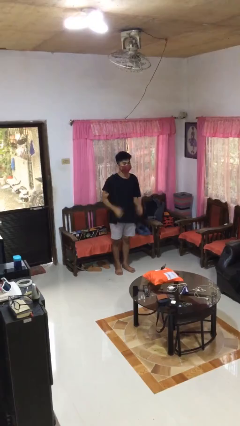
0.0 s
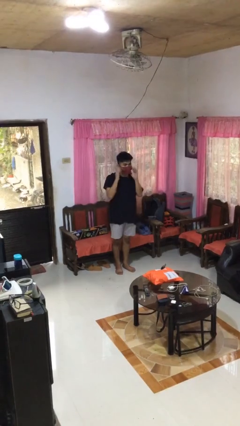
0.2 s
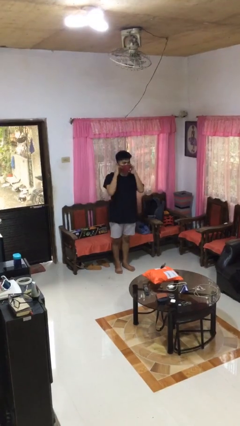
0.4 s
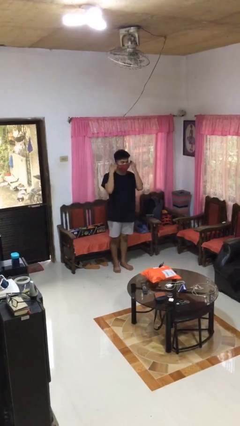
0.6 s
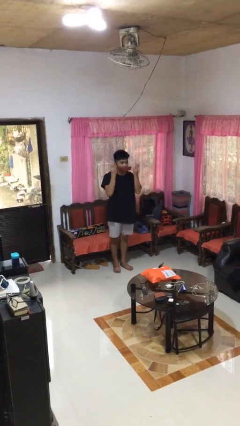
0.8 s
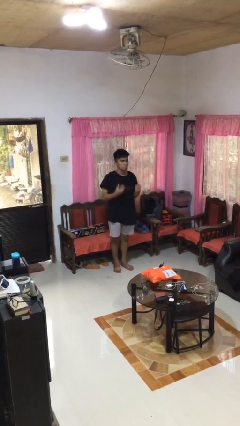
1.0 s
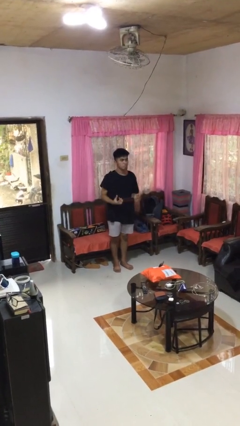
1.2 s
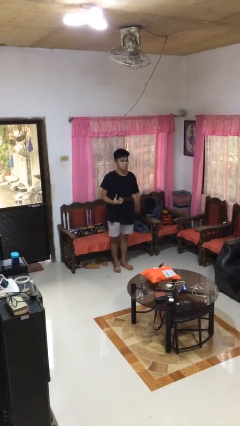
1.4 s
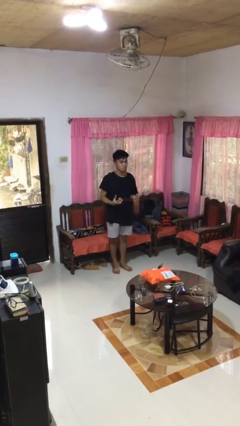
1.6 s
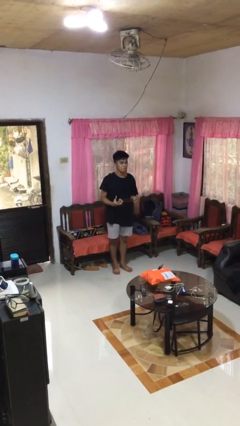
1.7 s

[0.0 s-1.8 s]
person takes off facemask

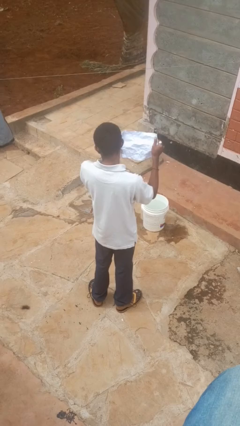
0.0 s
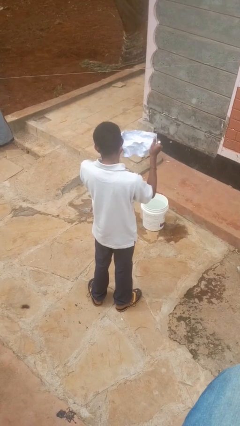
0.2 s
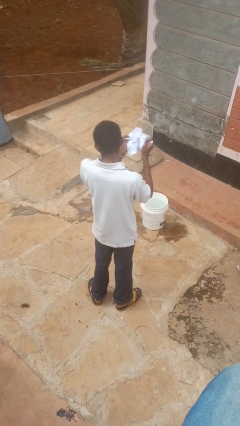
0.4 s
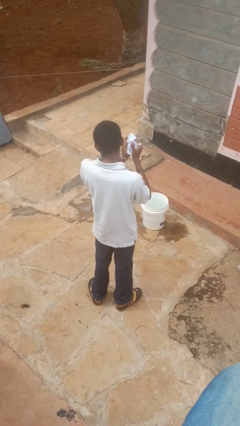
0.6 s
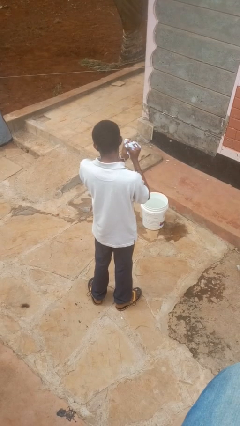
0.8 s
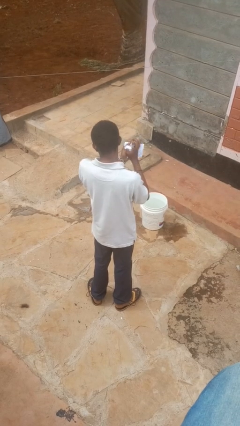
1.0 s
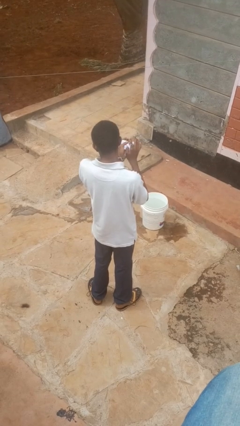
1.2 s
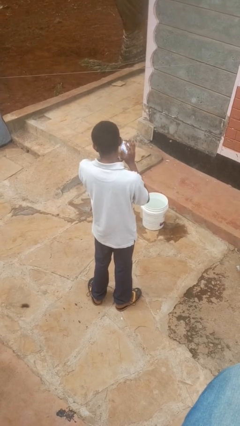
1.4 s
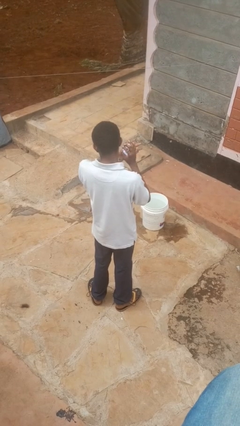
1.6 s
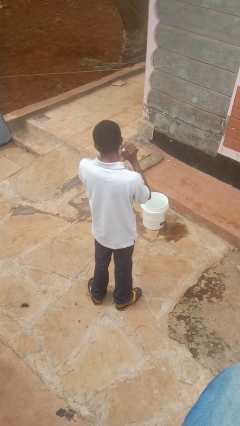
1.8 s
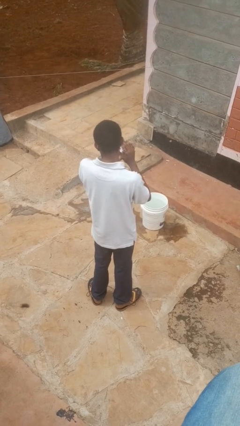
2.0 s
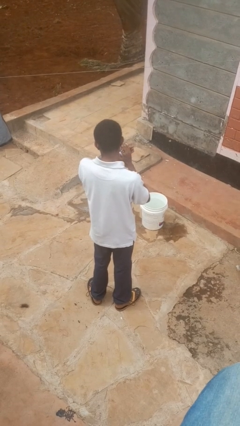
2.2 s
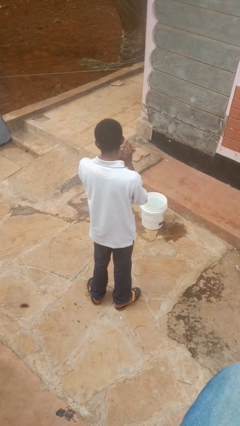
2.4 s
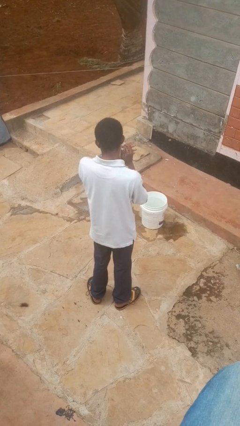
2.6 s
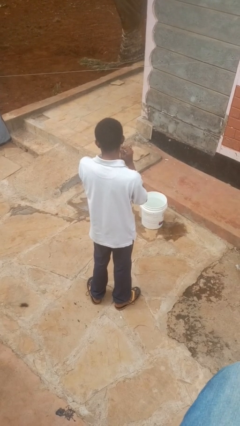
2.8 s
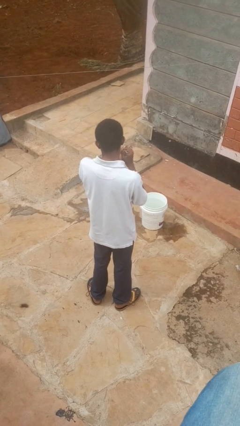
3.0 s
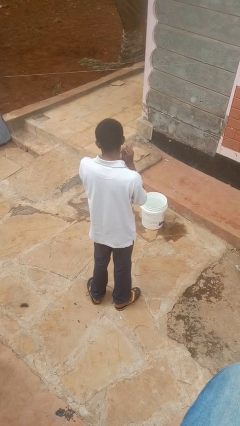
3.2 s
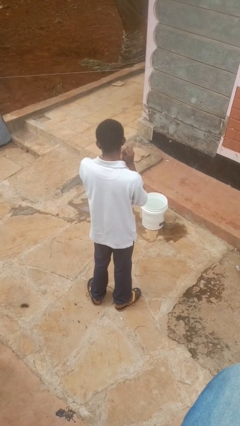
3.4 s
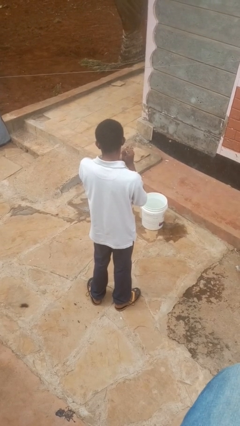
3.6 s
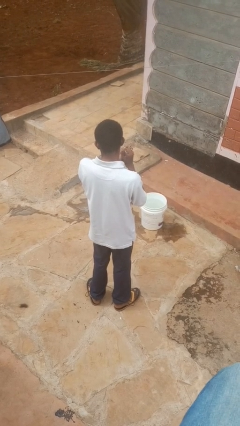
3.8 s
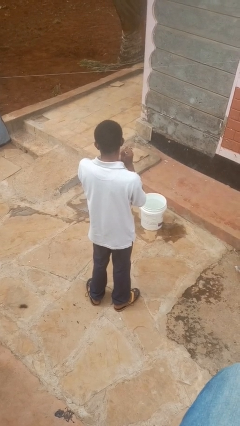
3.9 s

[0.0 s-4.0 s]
person crumples paper

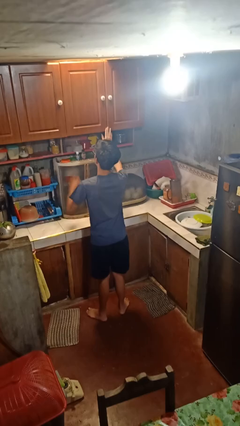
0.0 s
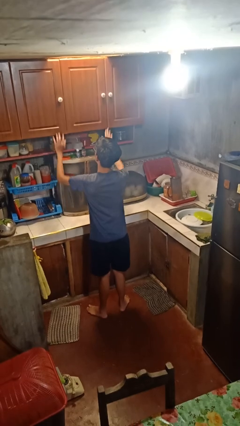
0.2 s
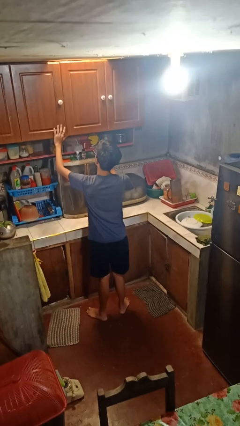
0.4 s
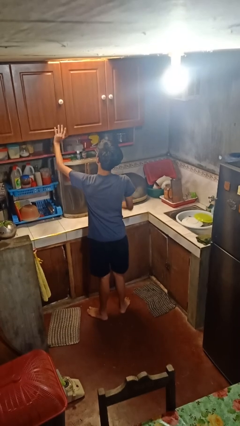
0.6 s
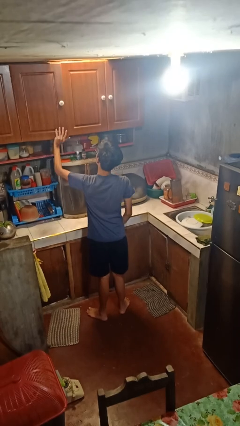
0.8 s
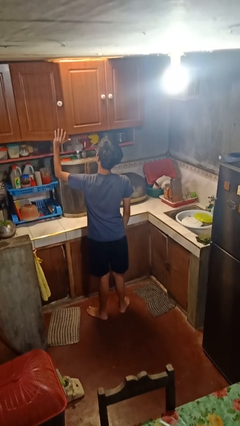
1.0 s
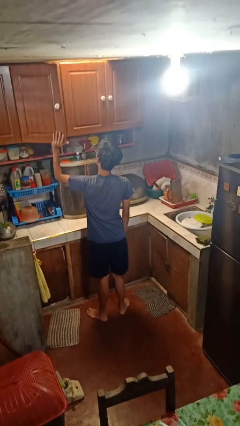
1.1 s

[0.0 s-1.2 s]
person opens cabinet

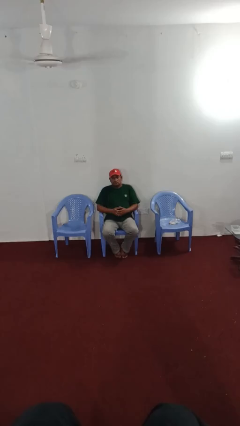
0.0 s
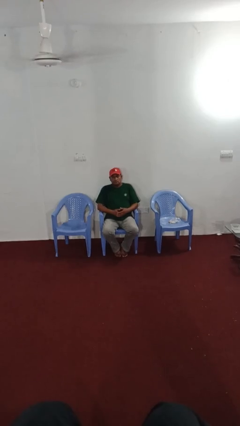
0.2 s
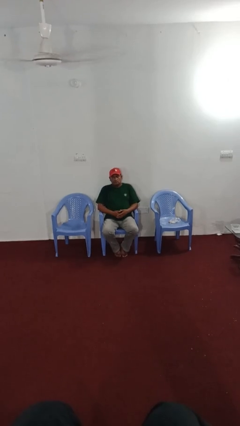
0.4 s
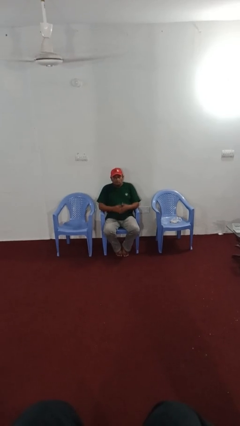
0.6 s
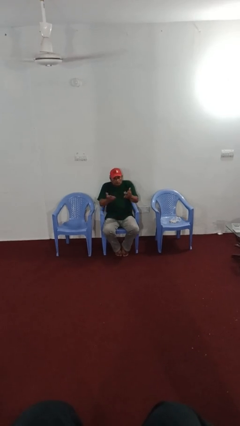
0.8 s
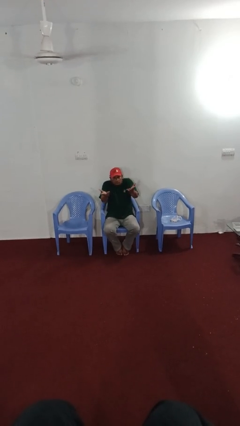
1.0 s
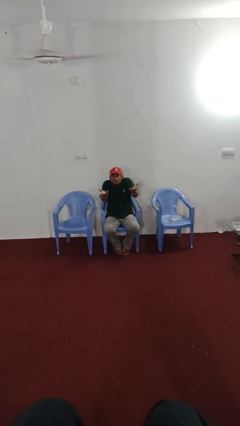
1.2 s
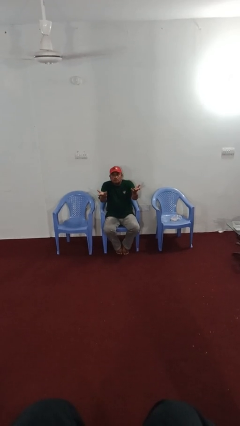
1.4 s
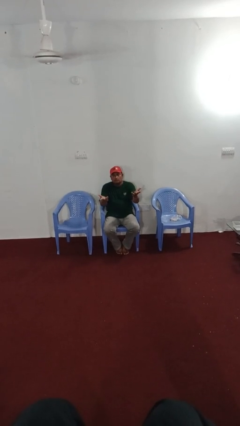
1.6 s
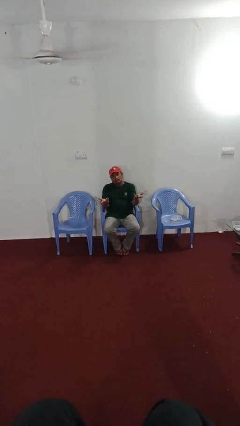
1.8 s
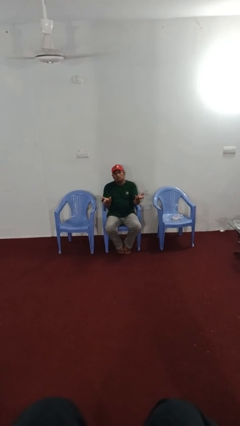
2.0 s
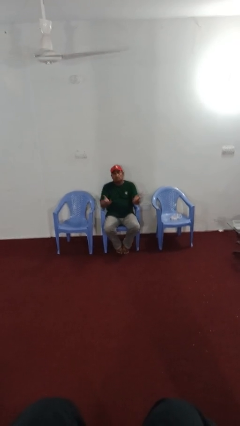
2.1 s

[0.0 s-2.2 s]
person shrugs

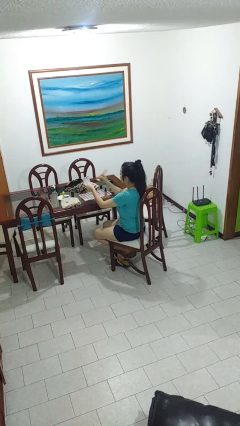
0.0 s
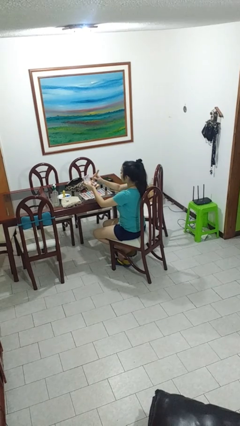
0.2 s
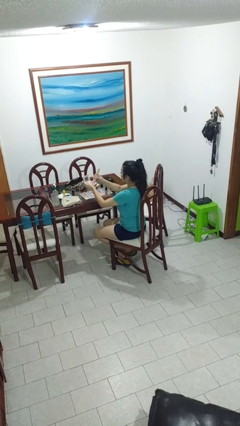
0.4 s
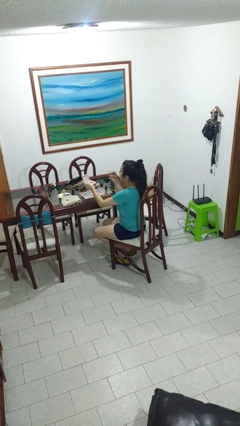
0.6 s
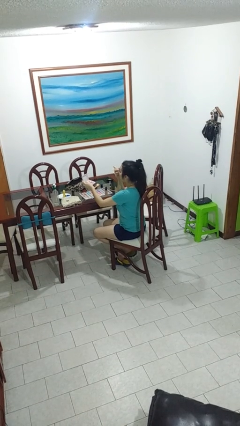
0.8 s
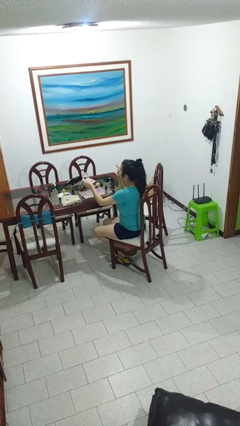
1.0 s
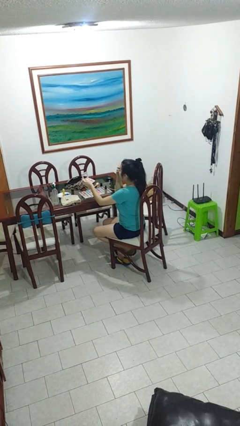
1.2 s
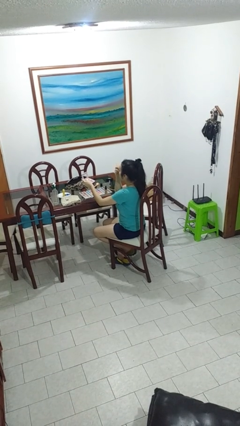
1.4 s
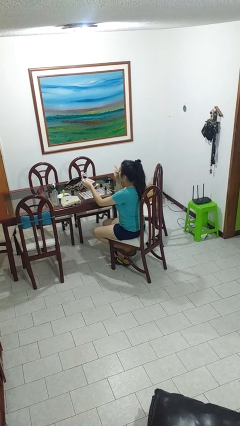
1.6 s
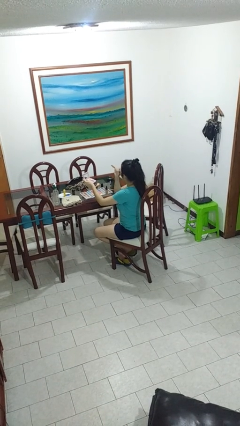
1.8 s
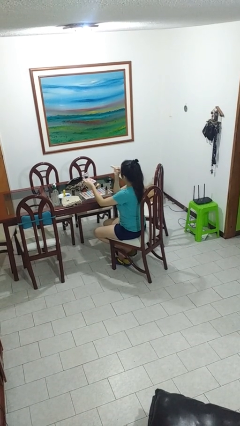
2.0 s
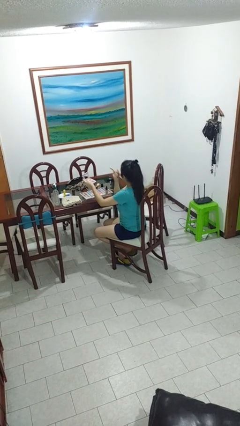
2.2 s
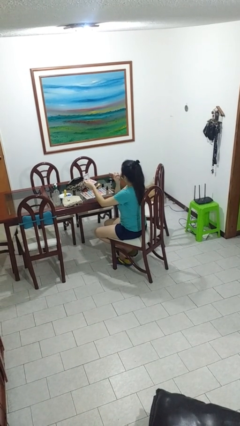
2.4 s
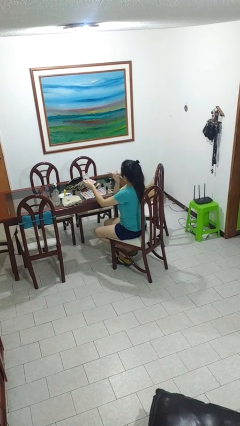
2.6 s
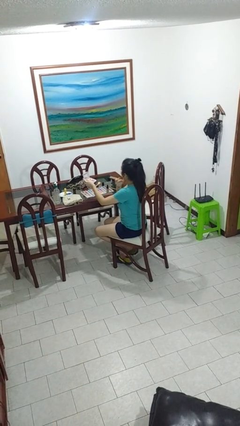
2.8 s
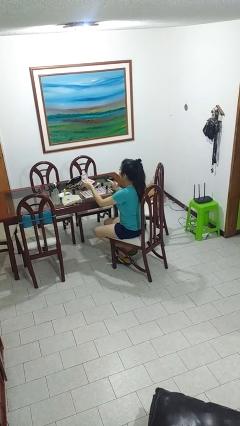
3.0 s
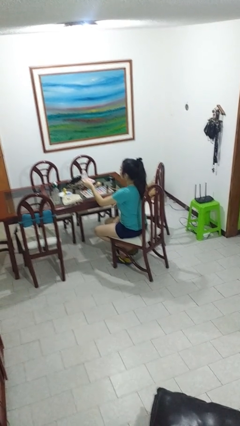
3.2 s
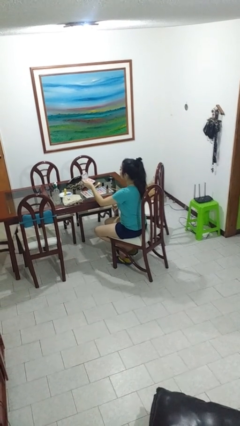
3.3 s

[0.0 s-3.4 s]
person applies foundation makeup

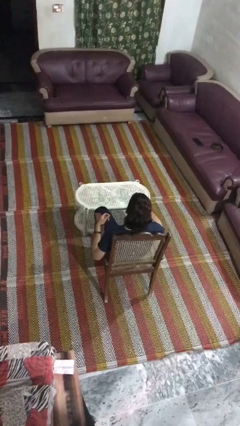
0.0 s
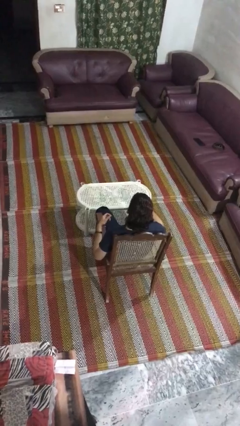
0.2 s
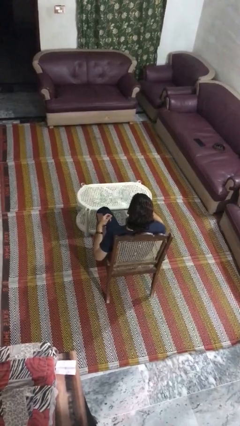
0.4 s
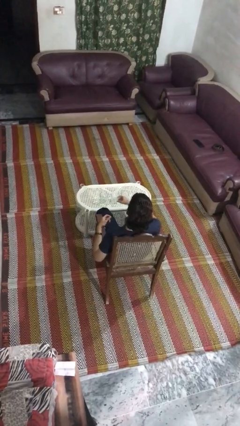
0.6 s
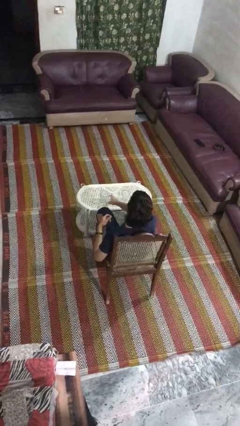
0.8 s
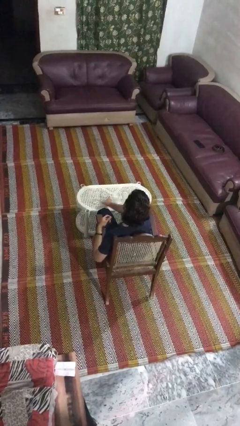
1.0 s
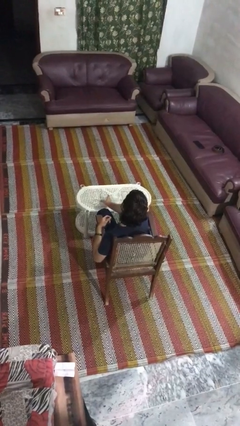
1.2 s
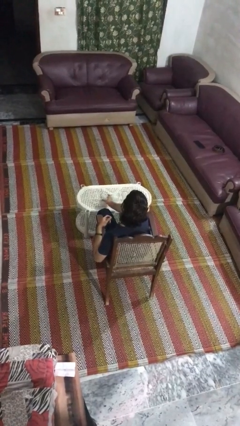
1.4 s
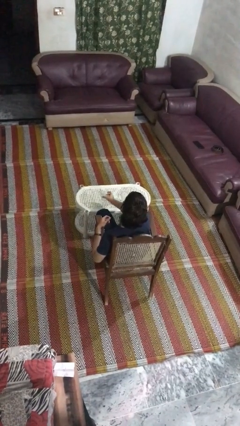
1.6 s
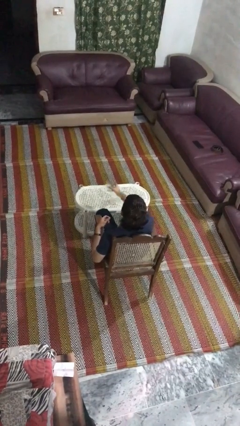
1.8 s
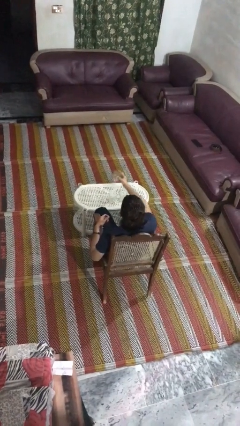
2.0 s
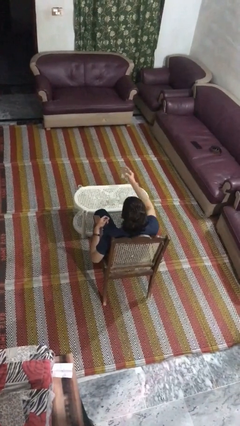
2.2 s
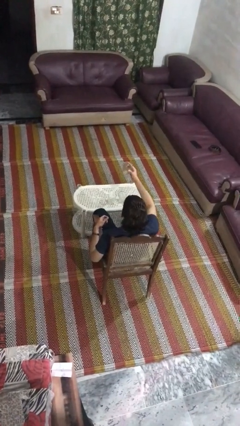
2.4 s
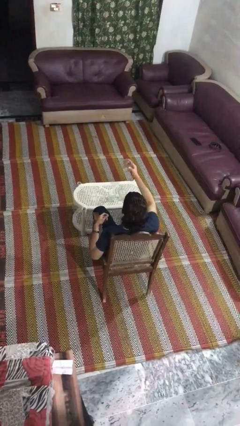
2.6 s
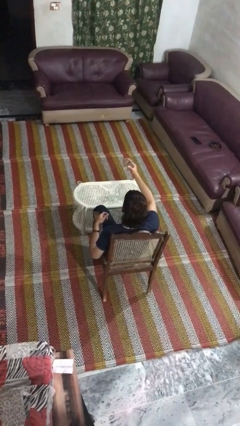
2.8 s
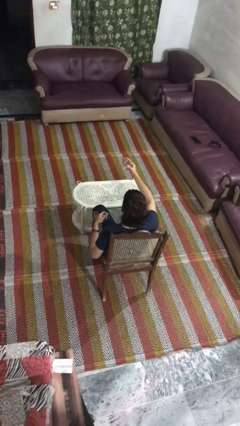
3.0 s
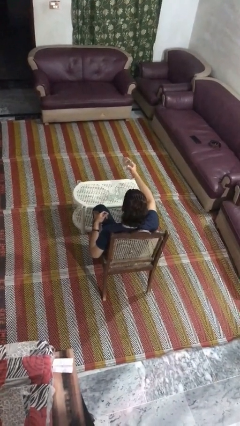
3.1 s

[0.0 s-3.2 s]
person picks up object from table

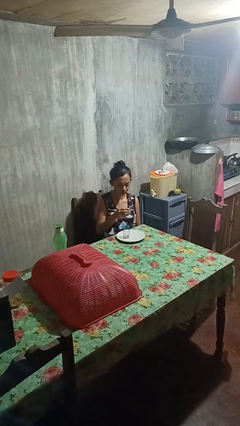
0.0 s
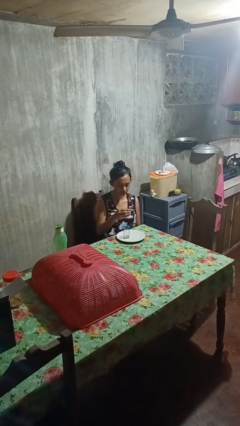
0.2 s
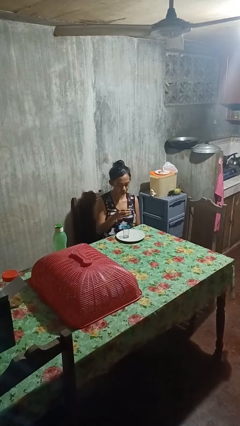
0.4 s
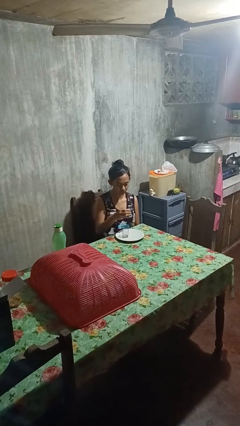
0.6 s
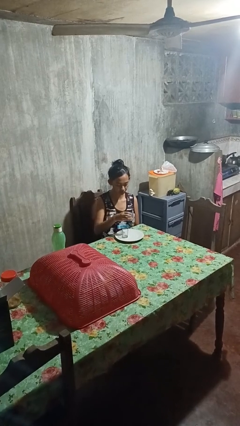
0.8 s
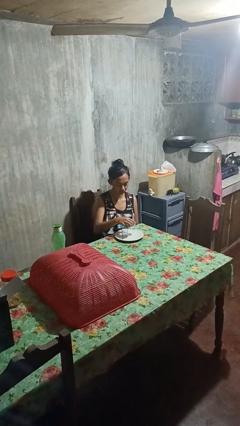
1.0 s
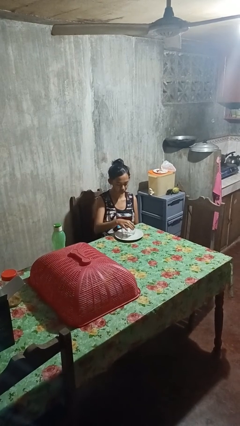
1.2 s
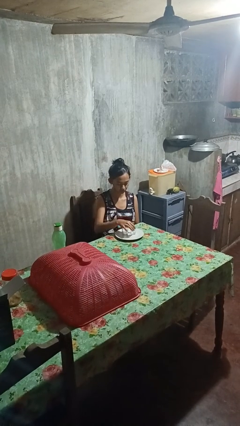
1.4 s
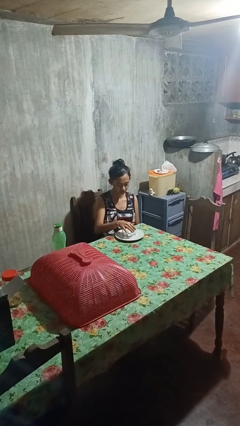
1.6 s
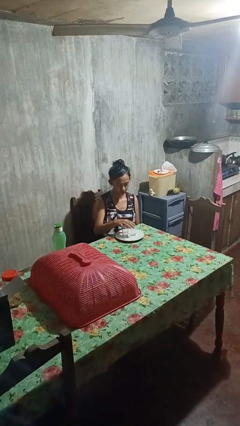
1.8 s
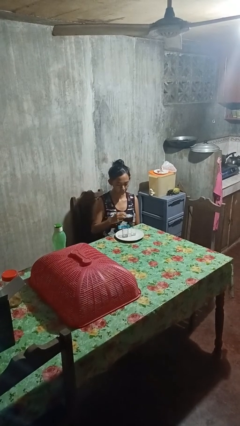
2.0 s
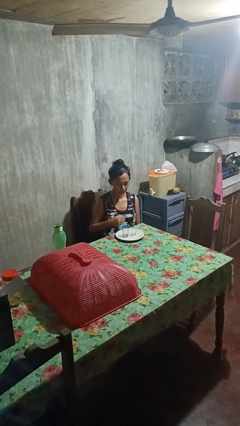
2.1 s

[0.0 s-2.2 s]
person puts down object on table
